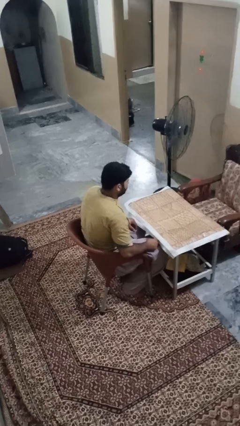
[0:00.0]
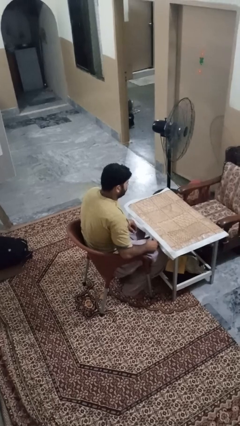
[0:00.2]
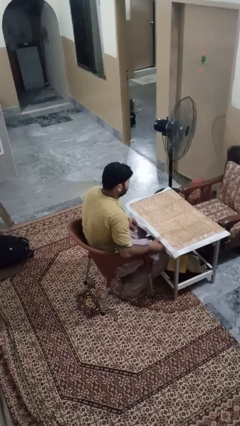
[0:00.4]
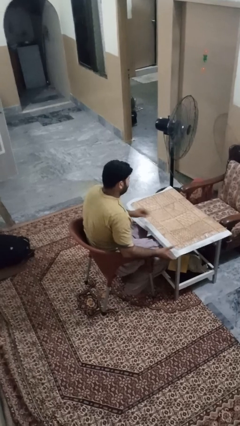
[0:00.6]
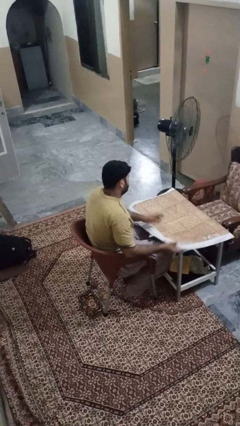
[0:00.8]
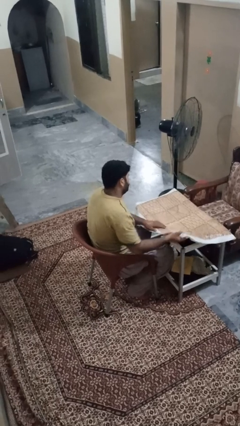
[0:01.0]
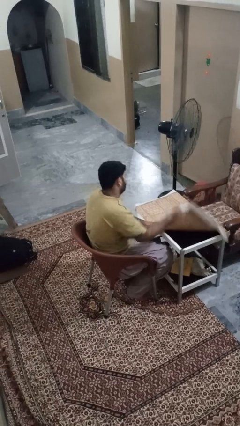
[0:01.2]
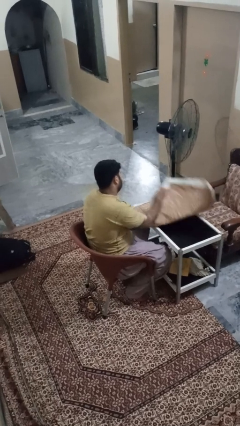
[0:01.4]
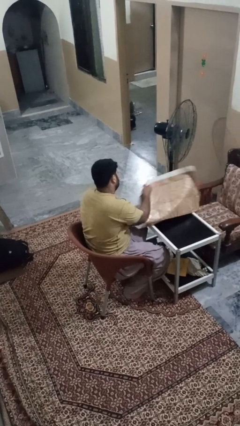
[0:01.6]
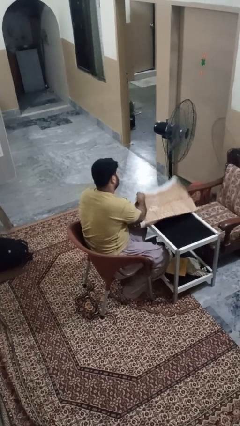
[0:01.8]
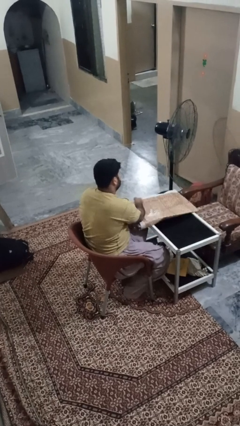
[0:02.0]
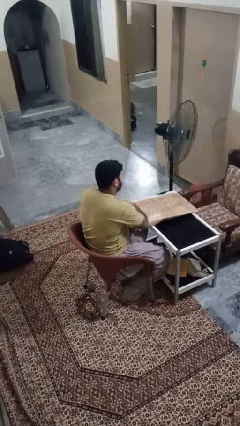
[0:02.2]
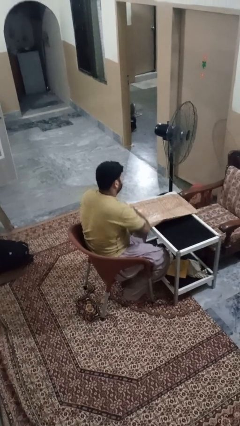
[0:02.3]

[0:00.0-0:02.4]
person folds tablecloth

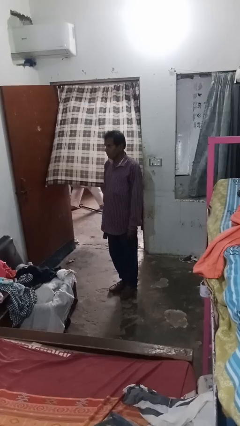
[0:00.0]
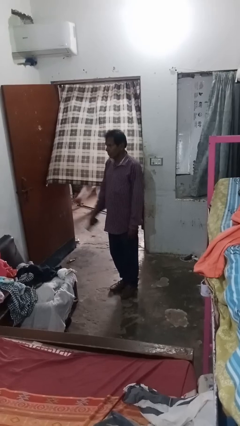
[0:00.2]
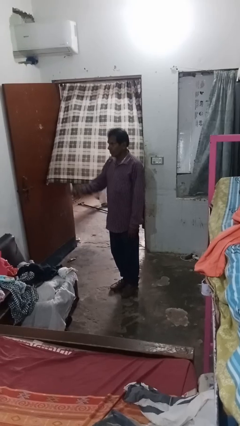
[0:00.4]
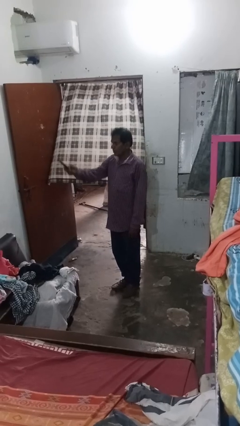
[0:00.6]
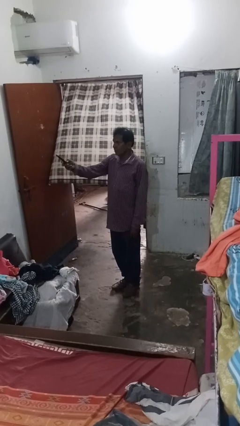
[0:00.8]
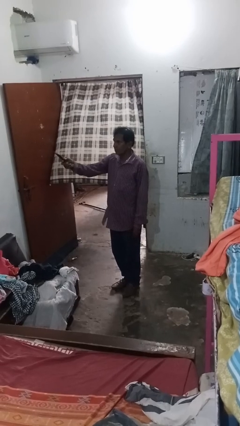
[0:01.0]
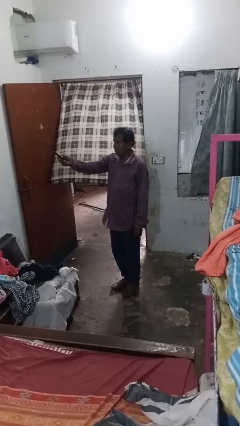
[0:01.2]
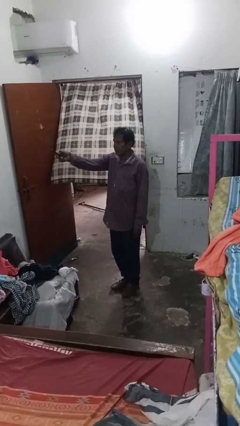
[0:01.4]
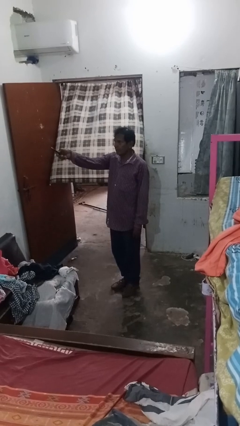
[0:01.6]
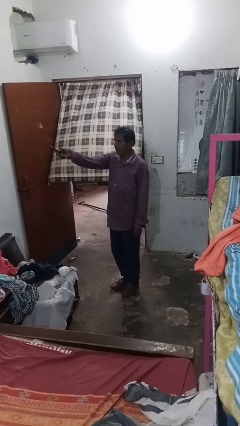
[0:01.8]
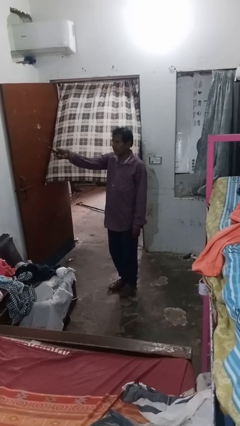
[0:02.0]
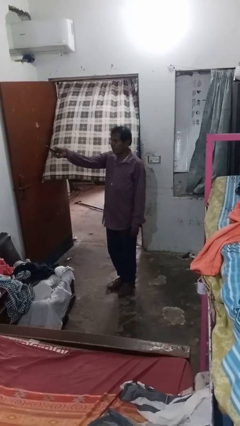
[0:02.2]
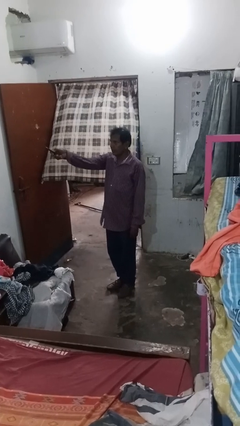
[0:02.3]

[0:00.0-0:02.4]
person uses television remote

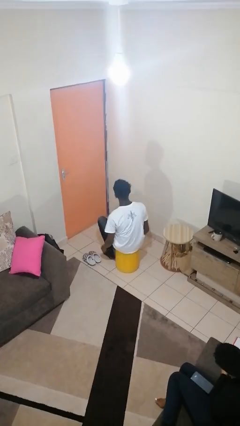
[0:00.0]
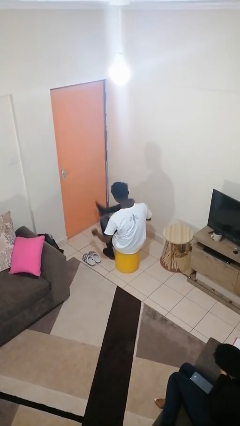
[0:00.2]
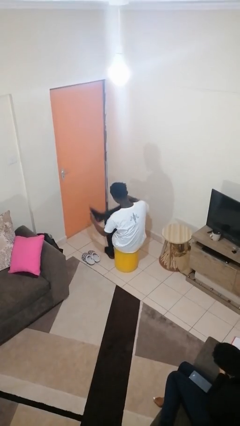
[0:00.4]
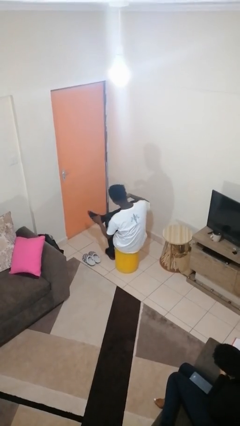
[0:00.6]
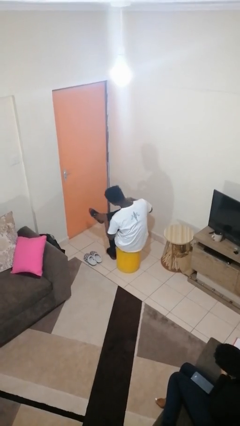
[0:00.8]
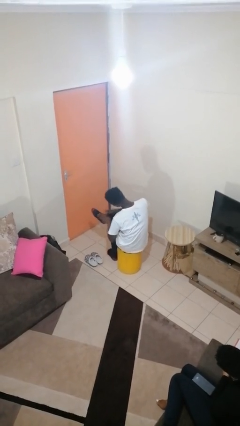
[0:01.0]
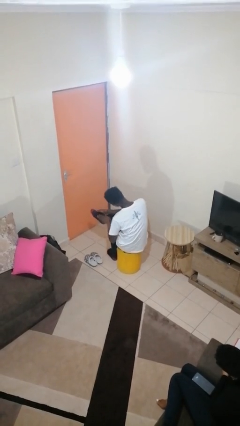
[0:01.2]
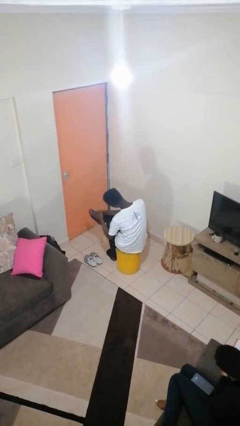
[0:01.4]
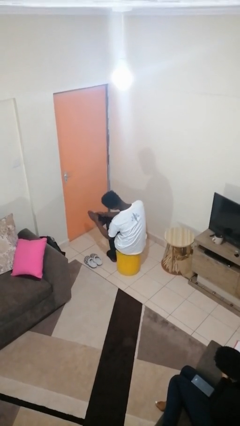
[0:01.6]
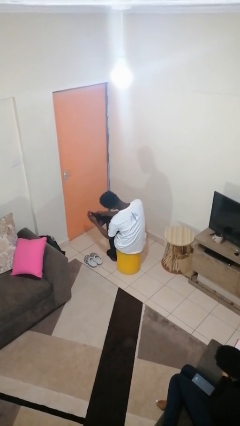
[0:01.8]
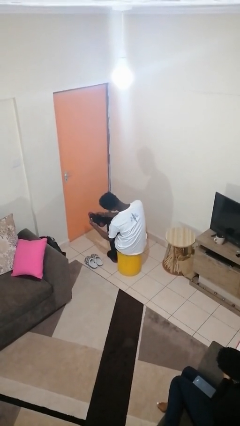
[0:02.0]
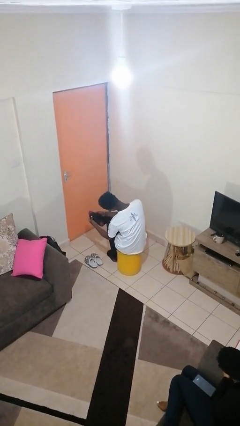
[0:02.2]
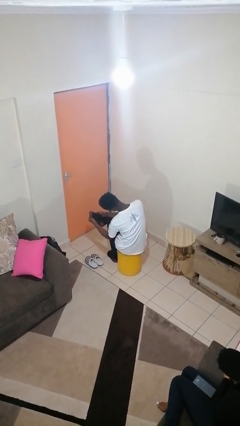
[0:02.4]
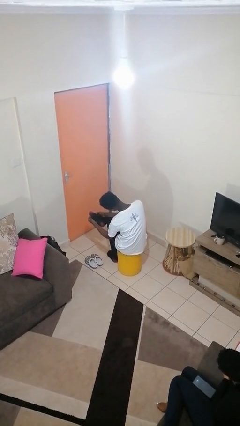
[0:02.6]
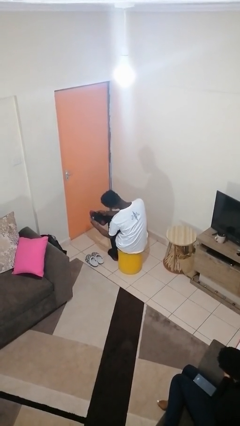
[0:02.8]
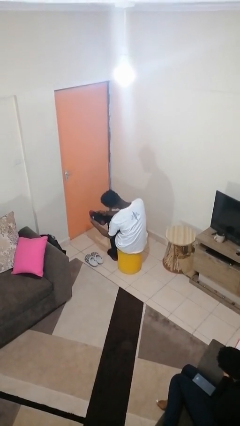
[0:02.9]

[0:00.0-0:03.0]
person rubs foot

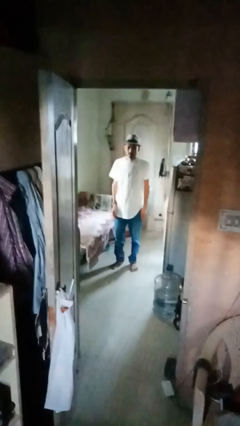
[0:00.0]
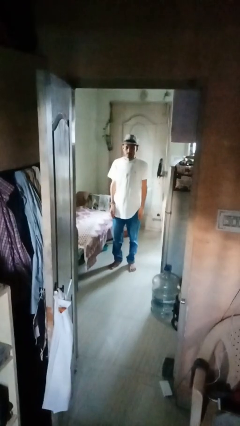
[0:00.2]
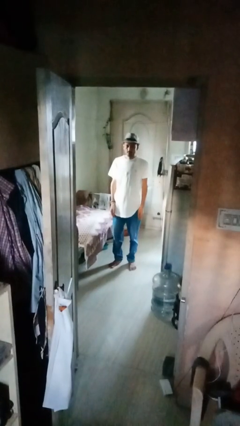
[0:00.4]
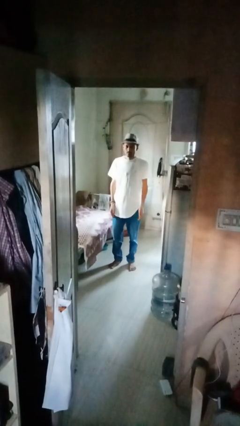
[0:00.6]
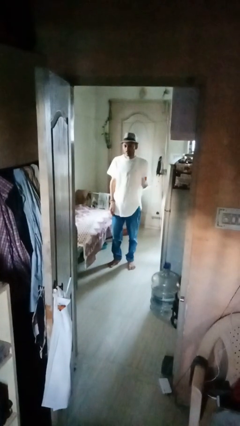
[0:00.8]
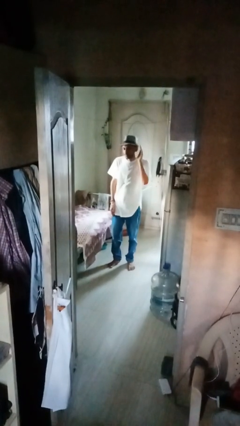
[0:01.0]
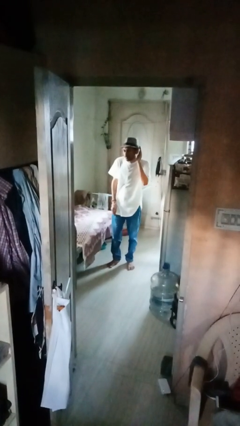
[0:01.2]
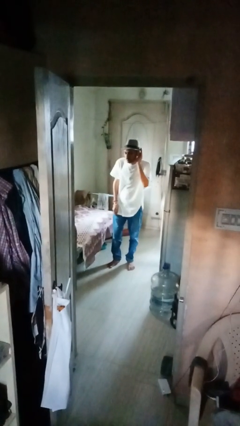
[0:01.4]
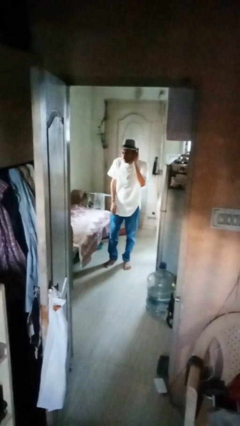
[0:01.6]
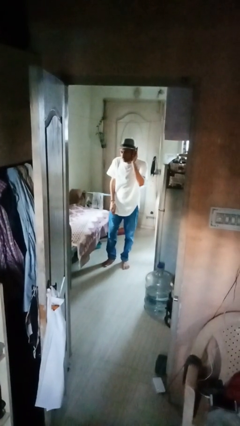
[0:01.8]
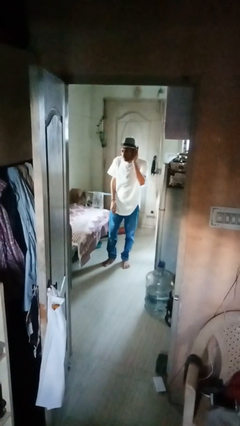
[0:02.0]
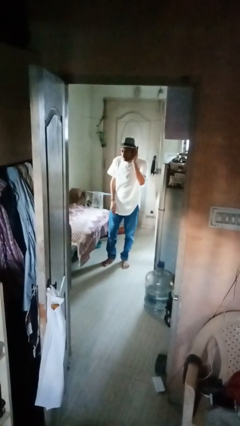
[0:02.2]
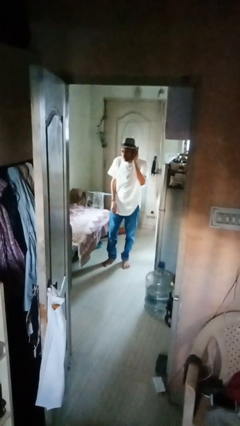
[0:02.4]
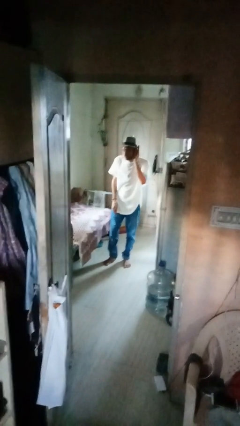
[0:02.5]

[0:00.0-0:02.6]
person gestures listen closely

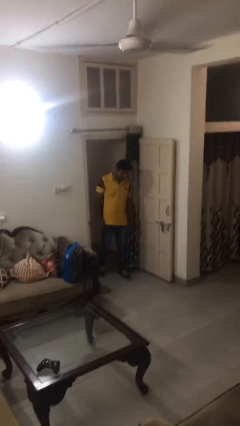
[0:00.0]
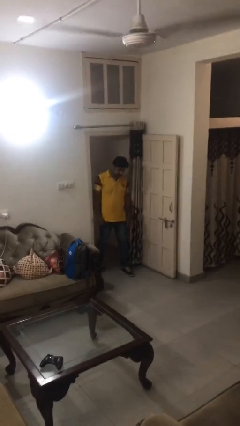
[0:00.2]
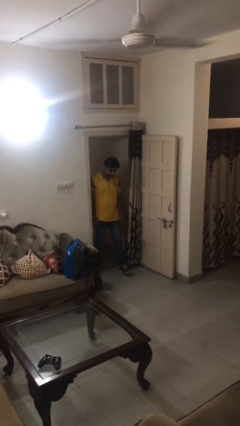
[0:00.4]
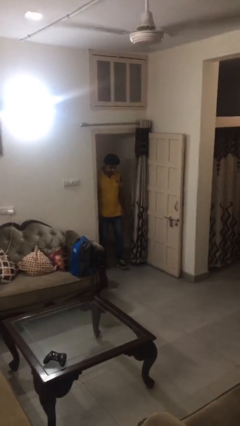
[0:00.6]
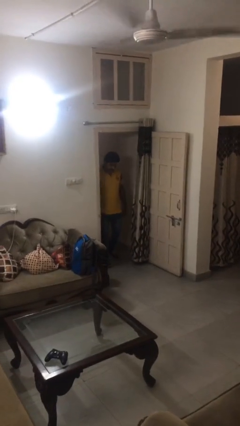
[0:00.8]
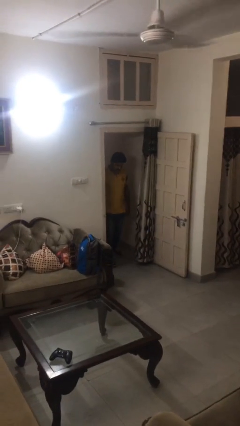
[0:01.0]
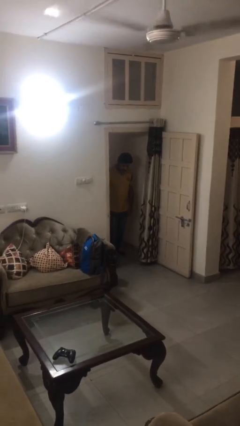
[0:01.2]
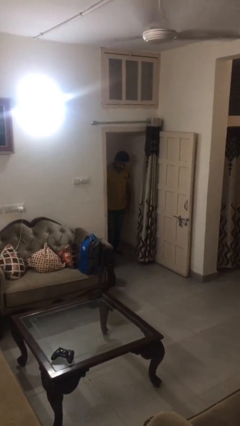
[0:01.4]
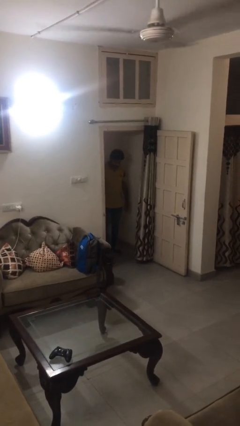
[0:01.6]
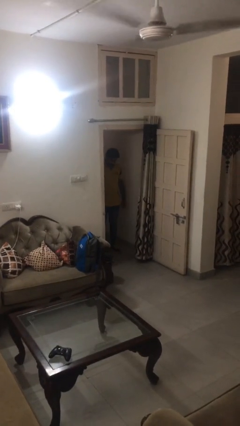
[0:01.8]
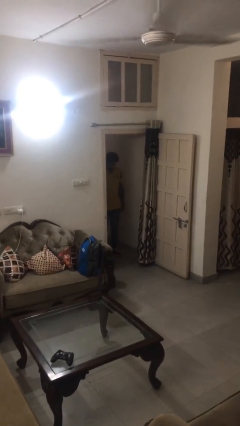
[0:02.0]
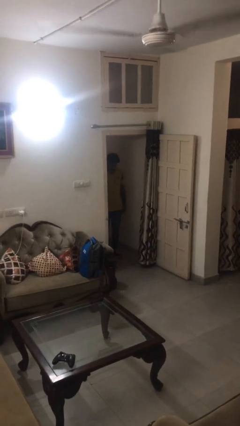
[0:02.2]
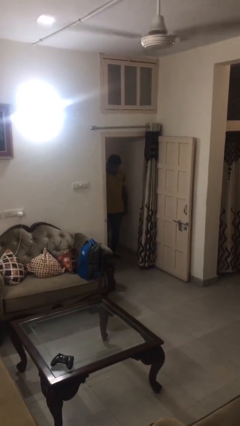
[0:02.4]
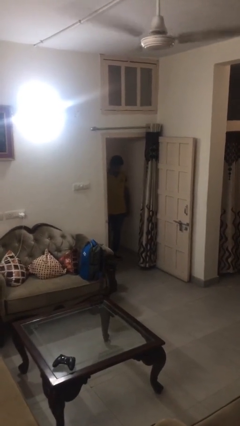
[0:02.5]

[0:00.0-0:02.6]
person bumps into wall

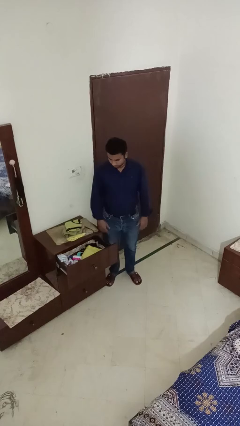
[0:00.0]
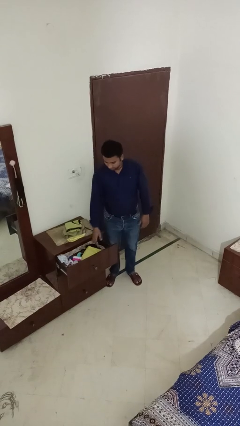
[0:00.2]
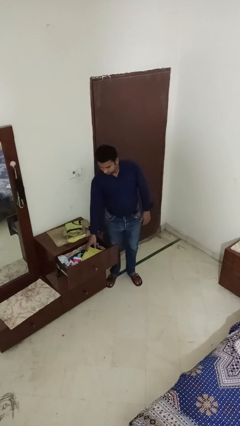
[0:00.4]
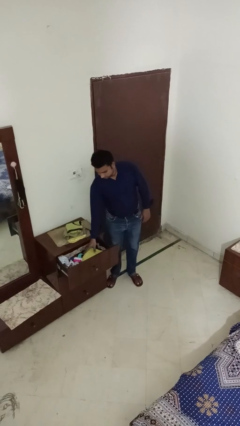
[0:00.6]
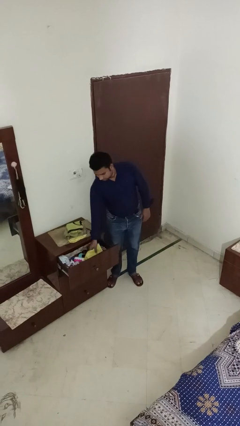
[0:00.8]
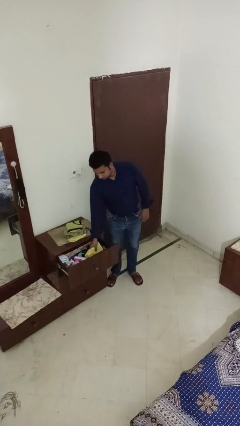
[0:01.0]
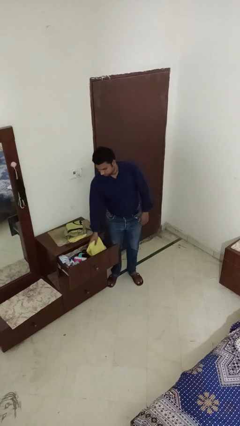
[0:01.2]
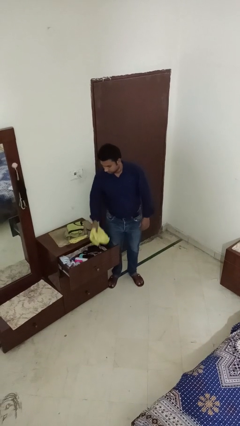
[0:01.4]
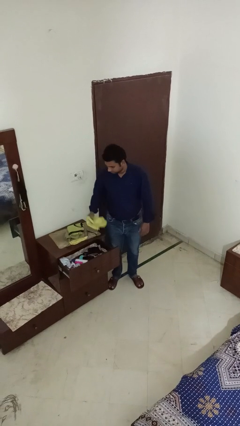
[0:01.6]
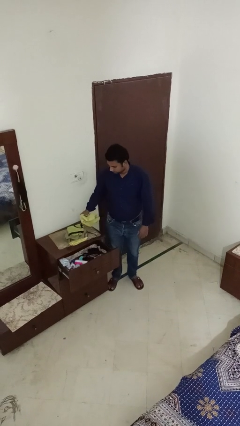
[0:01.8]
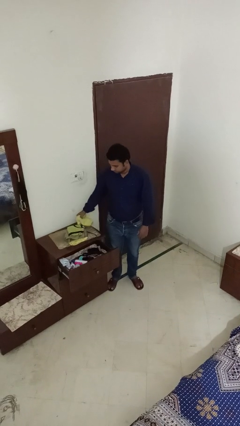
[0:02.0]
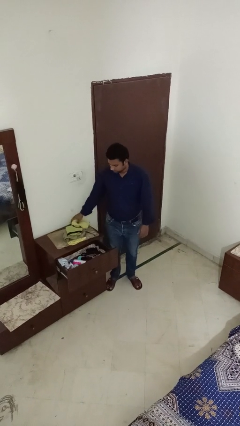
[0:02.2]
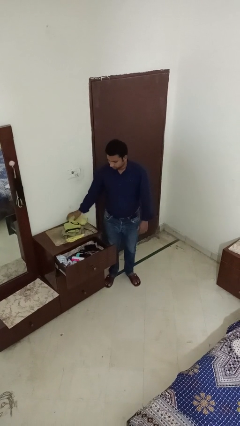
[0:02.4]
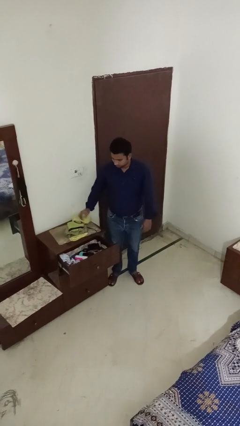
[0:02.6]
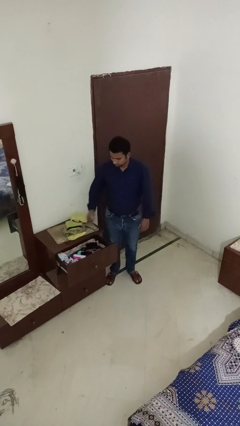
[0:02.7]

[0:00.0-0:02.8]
person takes clothes from dresser

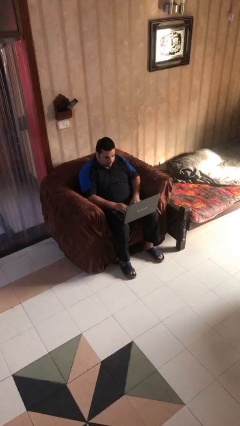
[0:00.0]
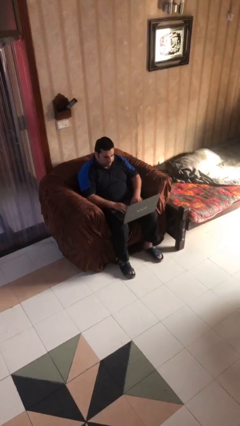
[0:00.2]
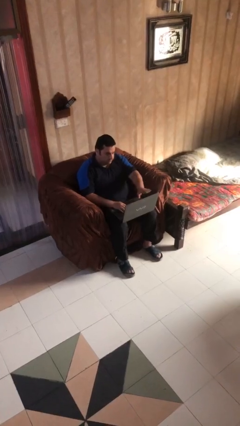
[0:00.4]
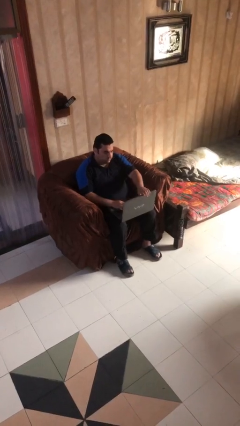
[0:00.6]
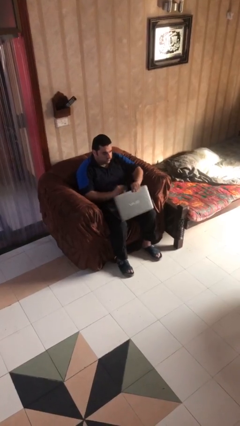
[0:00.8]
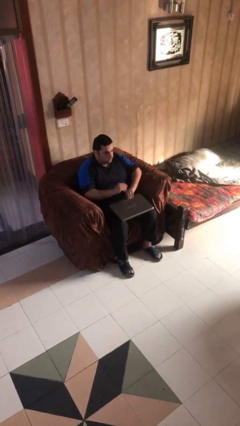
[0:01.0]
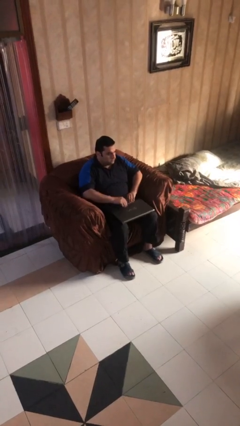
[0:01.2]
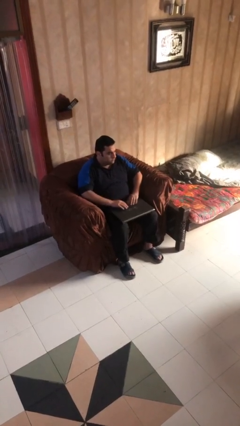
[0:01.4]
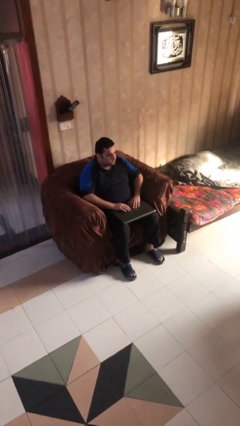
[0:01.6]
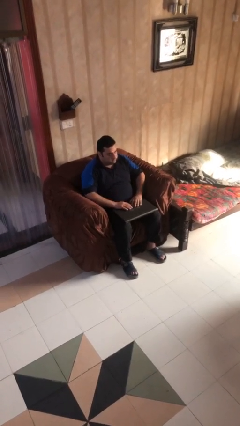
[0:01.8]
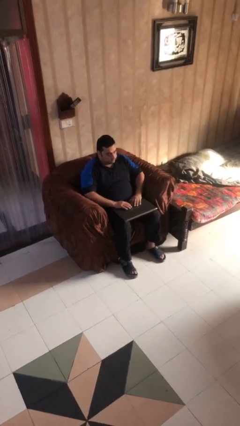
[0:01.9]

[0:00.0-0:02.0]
person closes laptop
